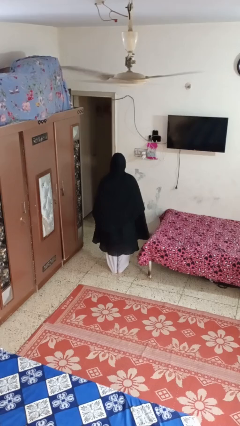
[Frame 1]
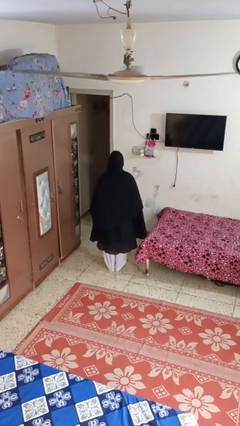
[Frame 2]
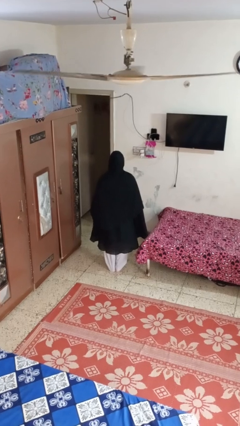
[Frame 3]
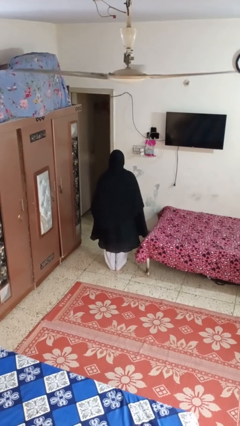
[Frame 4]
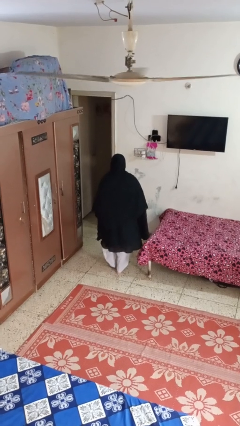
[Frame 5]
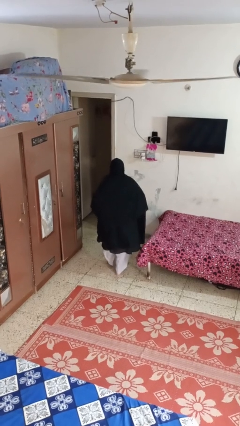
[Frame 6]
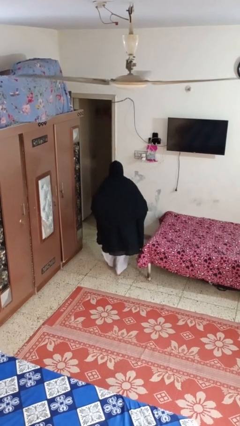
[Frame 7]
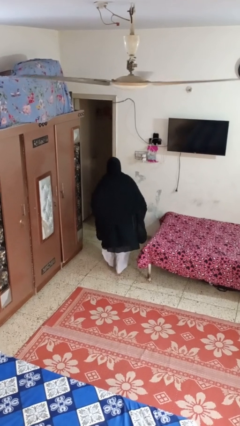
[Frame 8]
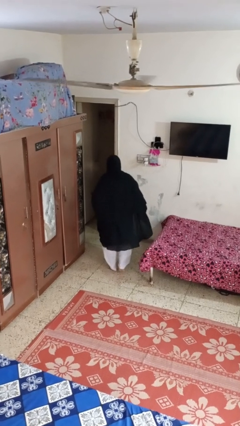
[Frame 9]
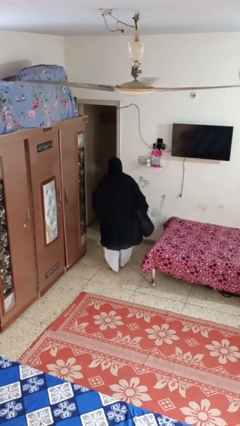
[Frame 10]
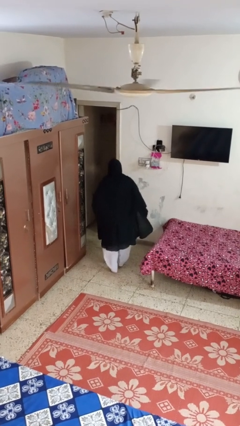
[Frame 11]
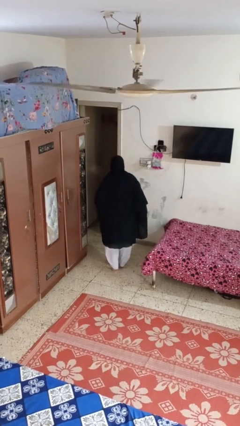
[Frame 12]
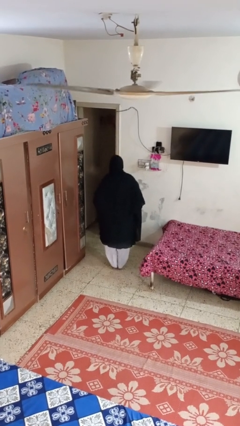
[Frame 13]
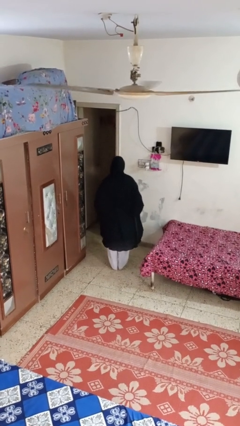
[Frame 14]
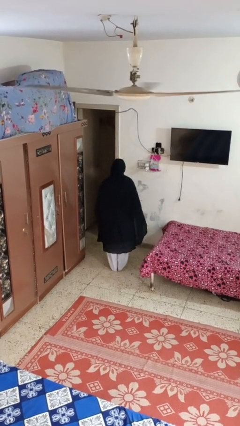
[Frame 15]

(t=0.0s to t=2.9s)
person walks tiptoe

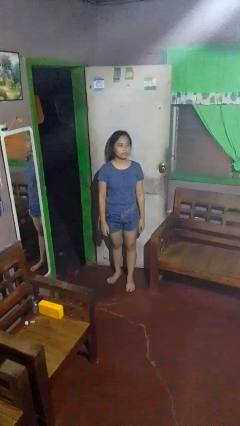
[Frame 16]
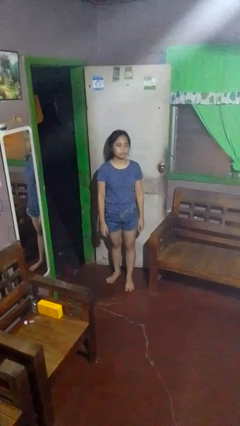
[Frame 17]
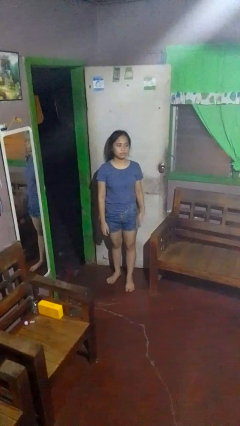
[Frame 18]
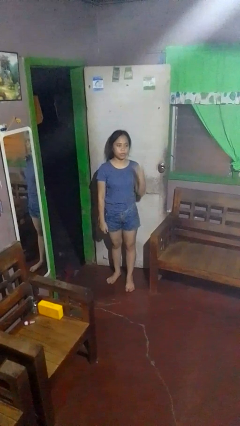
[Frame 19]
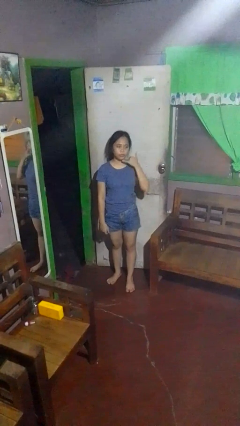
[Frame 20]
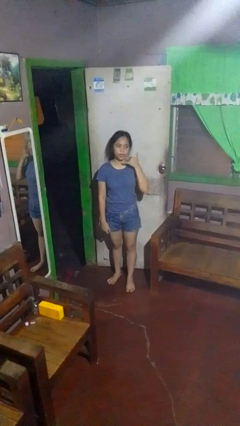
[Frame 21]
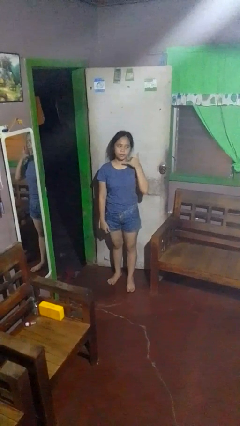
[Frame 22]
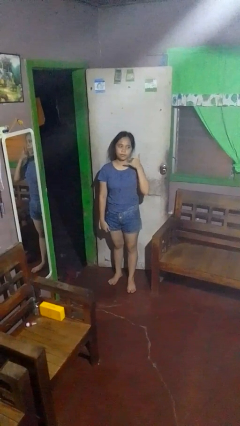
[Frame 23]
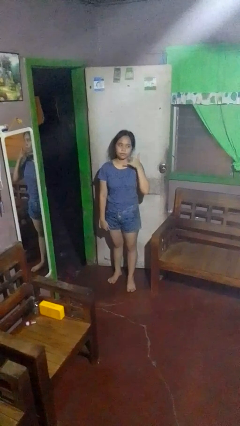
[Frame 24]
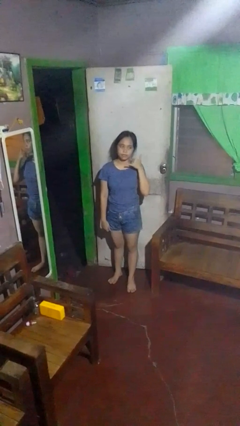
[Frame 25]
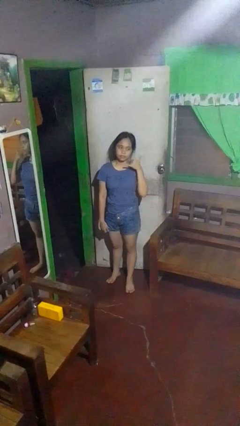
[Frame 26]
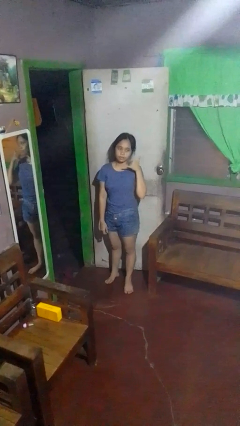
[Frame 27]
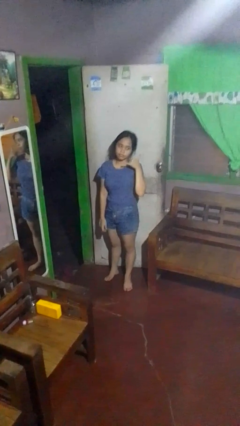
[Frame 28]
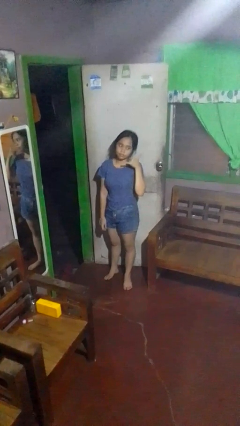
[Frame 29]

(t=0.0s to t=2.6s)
person gestures call me

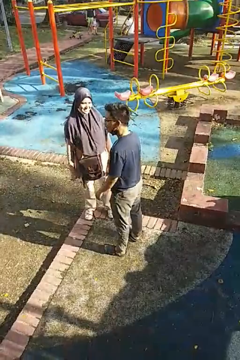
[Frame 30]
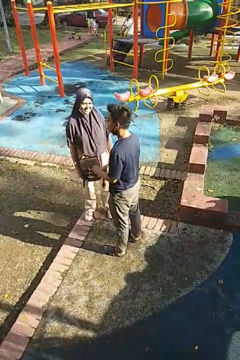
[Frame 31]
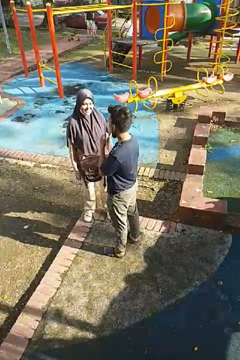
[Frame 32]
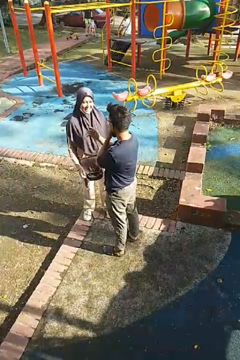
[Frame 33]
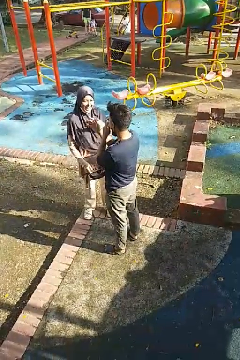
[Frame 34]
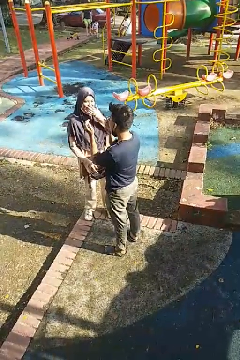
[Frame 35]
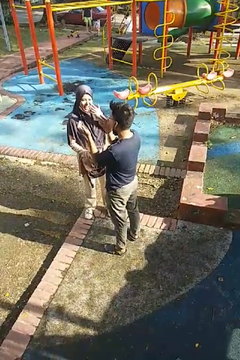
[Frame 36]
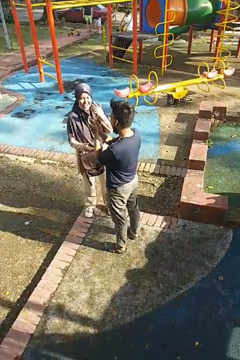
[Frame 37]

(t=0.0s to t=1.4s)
person laughs with person

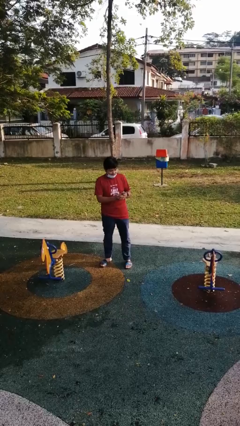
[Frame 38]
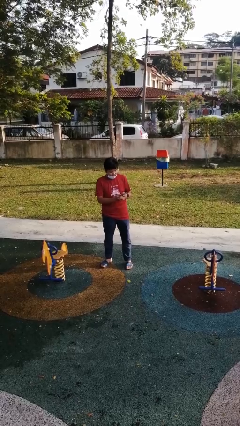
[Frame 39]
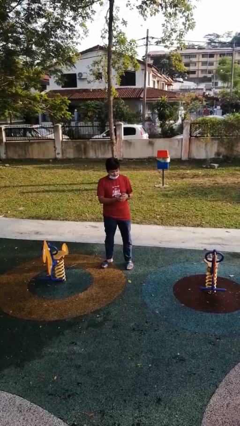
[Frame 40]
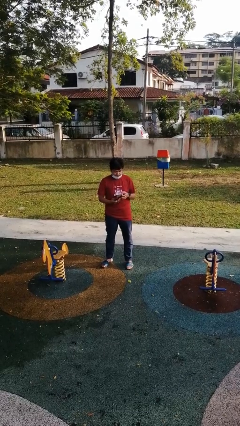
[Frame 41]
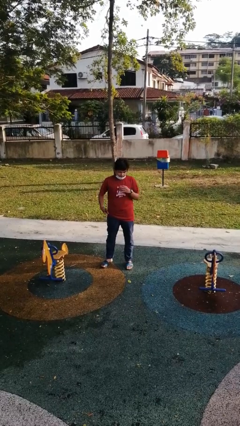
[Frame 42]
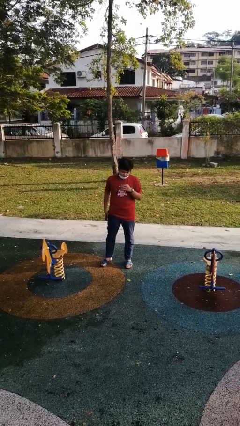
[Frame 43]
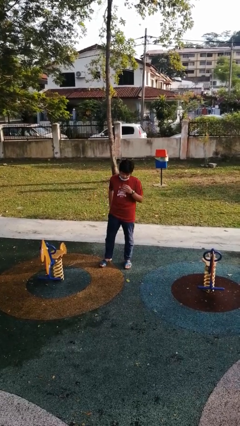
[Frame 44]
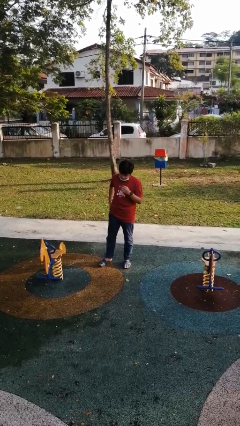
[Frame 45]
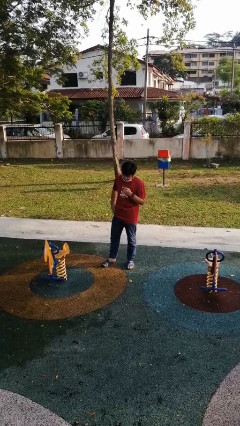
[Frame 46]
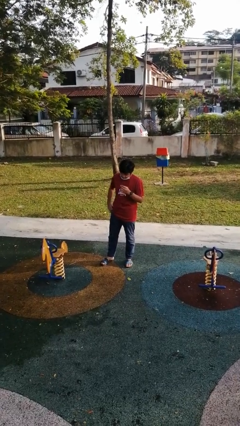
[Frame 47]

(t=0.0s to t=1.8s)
person puts phone into pocket

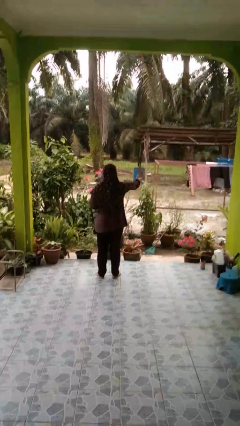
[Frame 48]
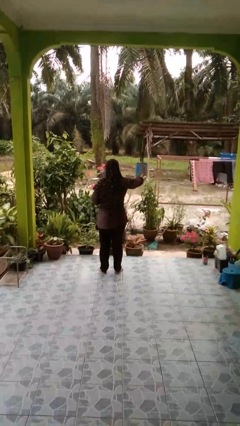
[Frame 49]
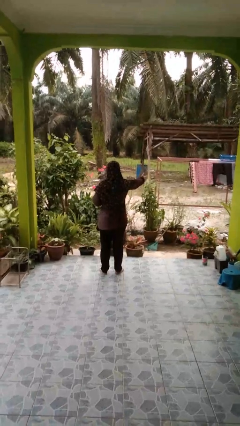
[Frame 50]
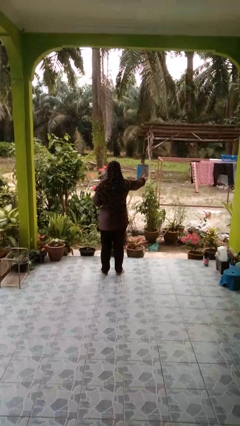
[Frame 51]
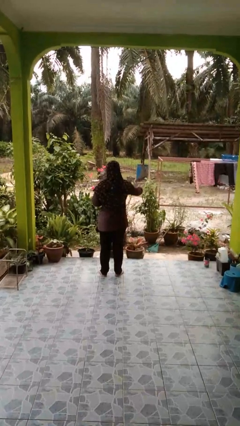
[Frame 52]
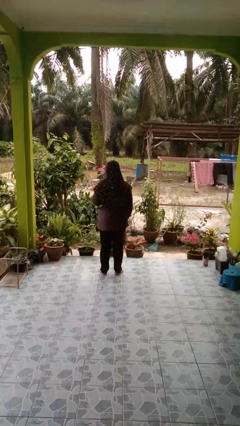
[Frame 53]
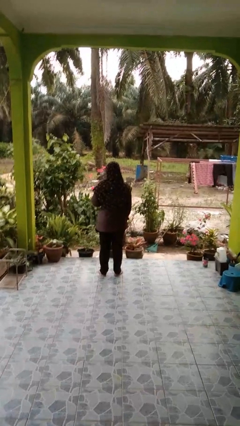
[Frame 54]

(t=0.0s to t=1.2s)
person karate chop

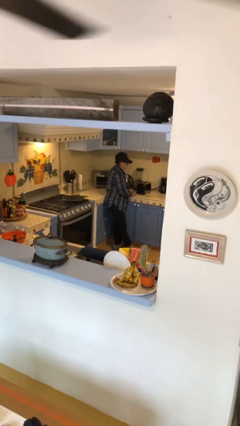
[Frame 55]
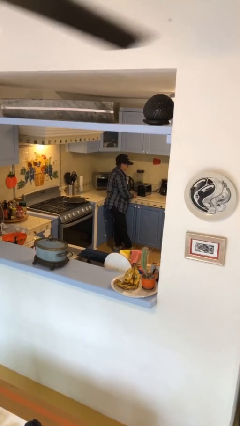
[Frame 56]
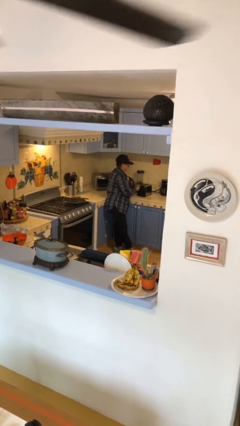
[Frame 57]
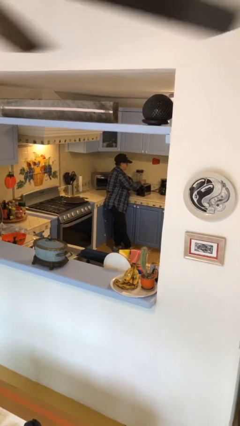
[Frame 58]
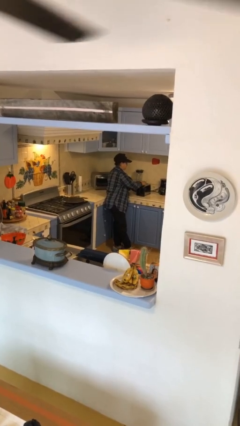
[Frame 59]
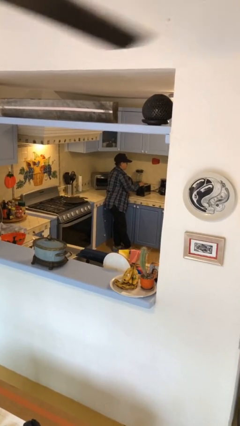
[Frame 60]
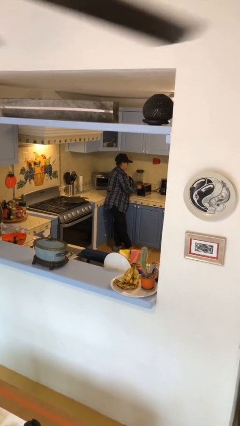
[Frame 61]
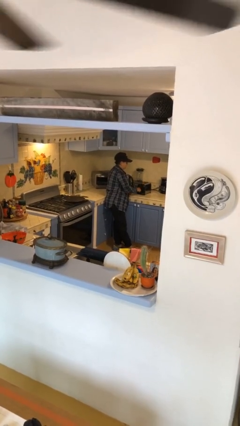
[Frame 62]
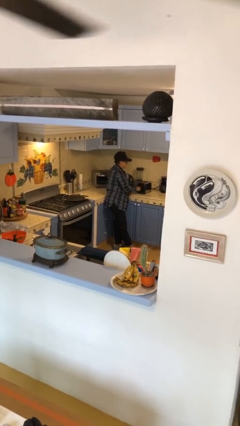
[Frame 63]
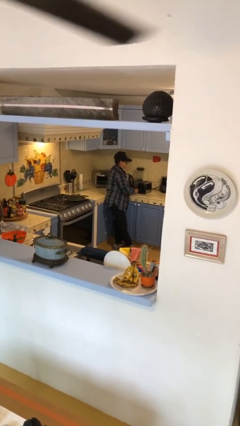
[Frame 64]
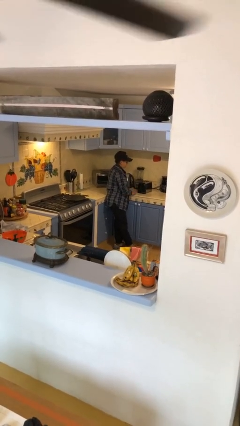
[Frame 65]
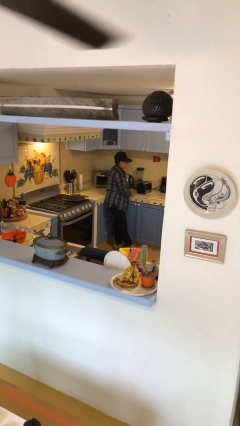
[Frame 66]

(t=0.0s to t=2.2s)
person puts object into toaster

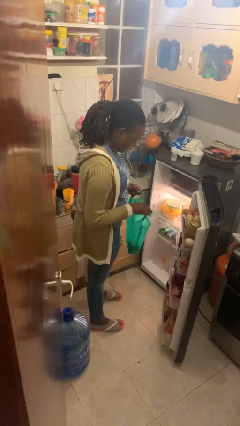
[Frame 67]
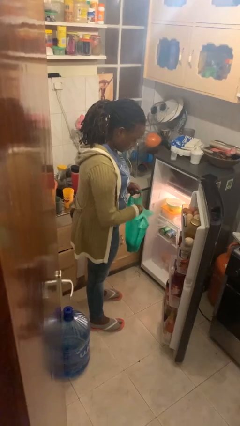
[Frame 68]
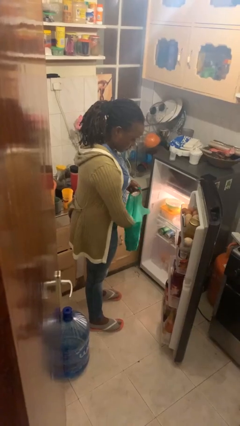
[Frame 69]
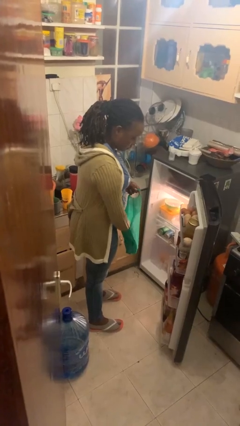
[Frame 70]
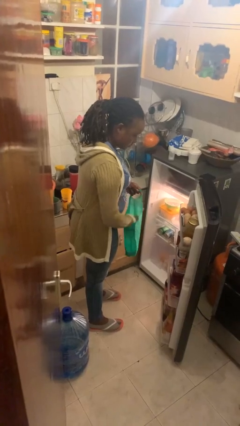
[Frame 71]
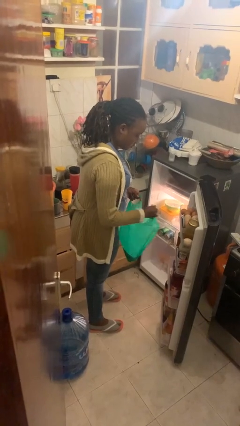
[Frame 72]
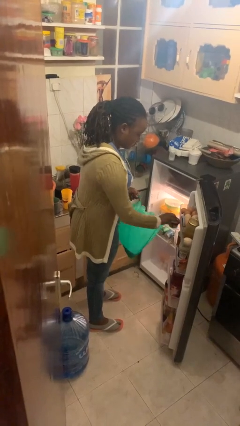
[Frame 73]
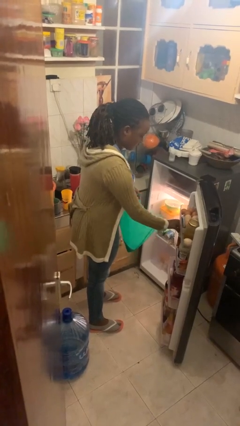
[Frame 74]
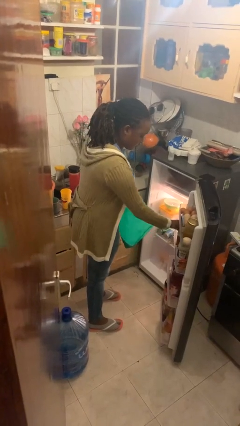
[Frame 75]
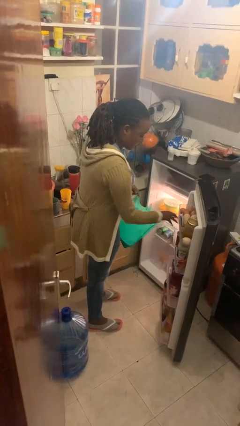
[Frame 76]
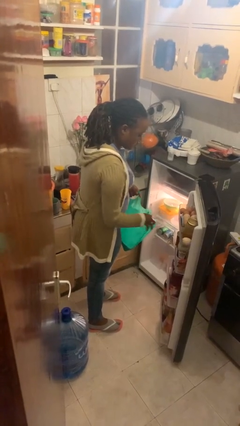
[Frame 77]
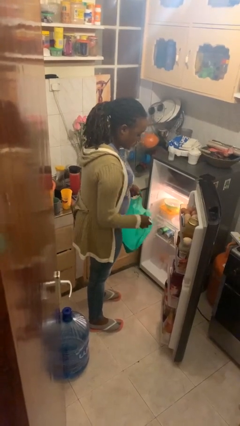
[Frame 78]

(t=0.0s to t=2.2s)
person loads groceries into refrigerator

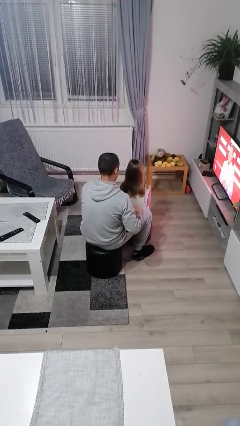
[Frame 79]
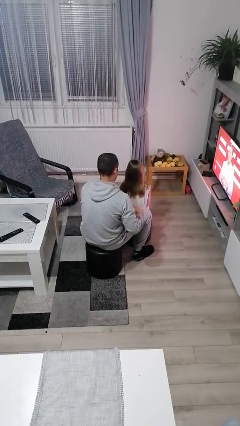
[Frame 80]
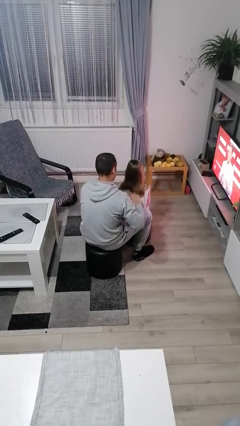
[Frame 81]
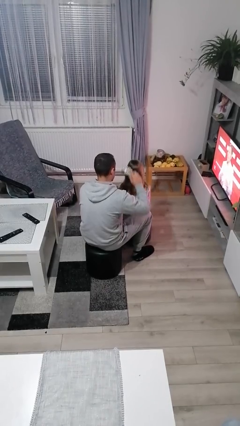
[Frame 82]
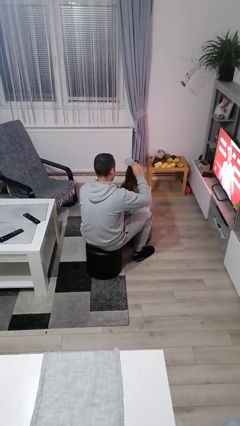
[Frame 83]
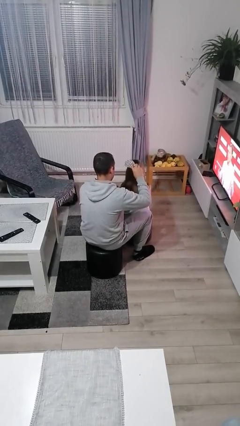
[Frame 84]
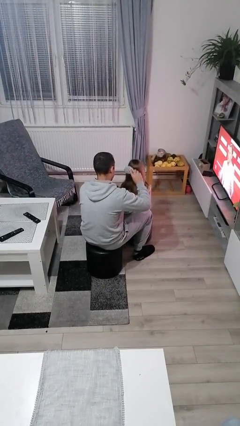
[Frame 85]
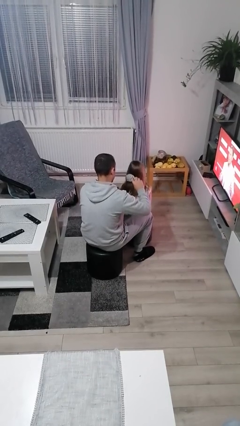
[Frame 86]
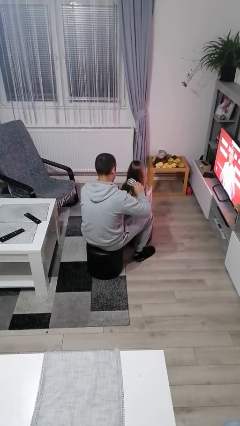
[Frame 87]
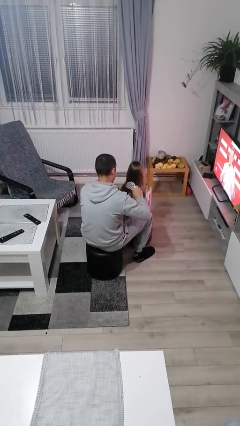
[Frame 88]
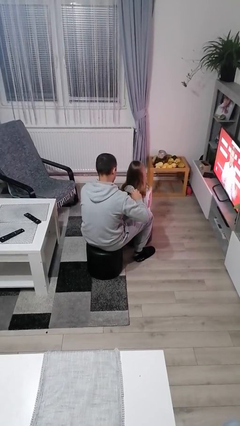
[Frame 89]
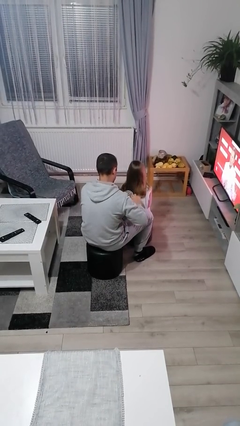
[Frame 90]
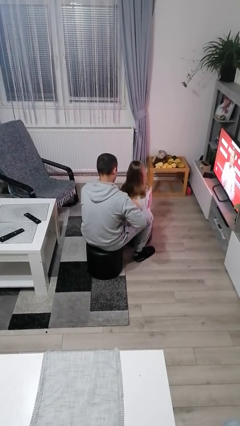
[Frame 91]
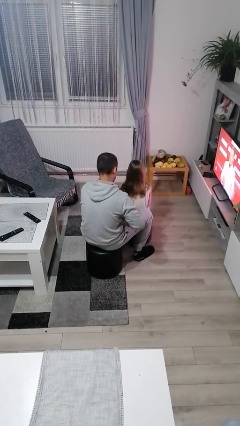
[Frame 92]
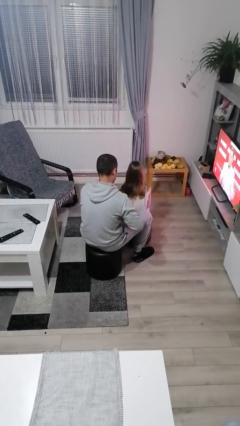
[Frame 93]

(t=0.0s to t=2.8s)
person brushes hair of person
